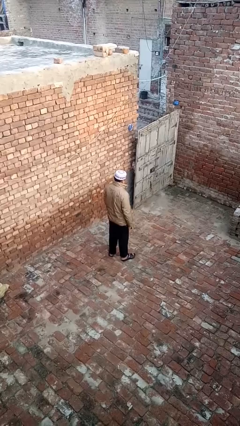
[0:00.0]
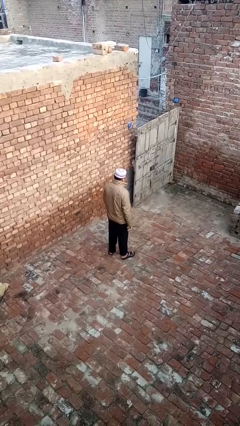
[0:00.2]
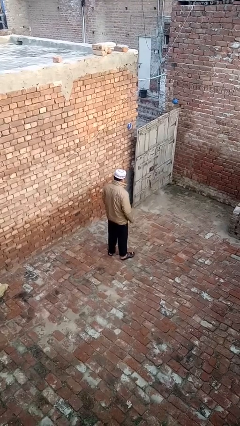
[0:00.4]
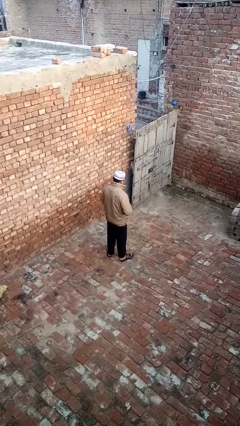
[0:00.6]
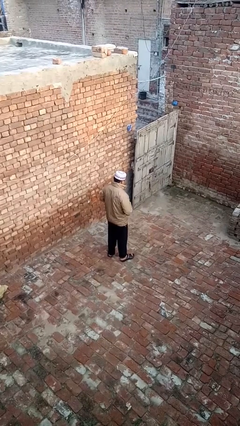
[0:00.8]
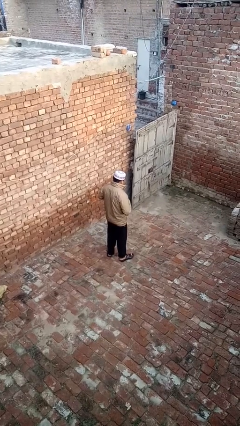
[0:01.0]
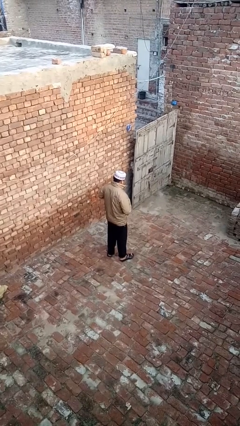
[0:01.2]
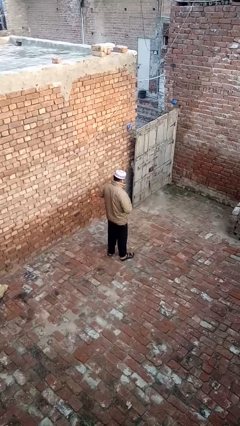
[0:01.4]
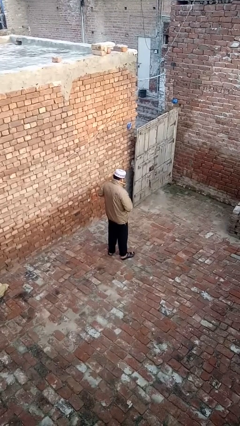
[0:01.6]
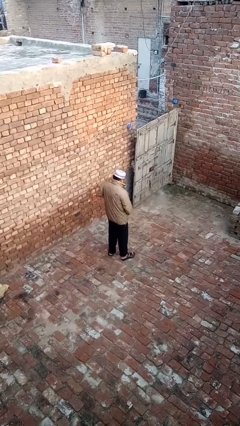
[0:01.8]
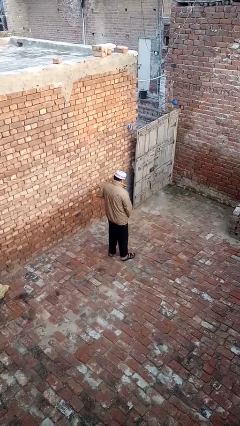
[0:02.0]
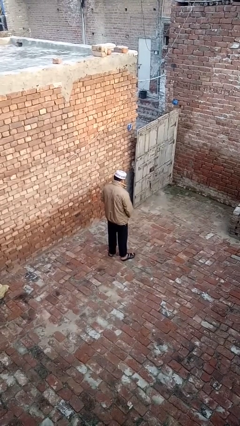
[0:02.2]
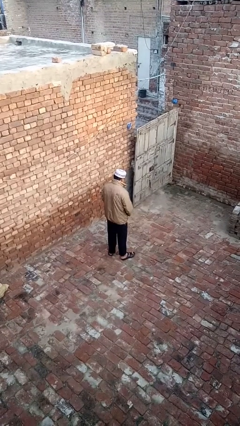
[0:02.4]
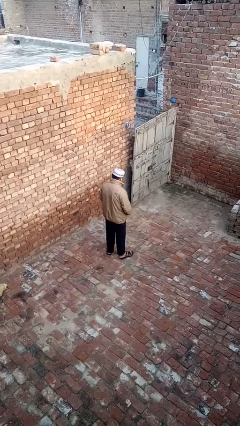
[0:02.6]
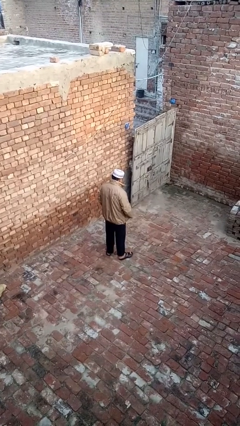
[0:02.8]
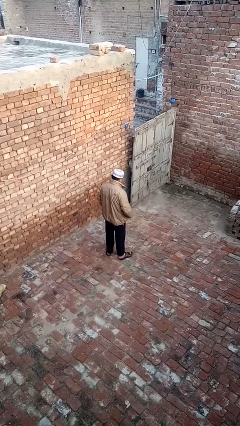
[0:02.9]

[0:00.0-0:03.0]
person unzips jacket

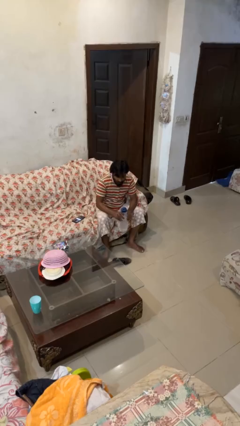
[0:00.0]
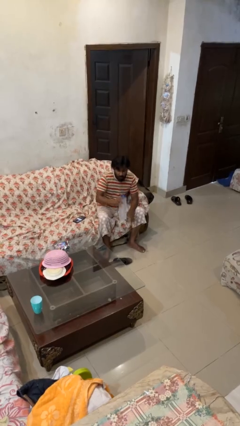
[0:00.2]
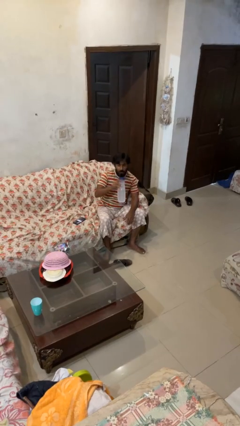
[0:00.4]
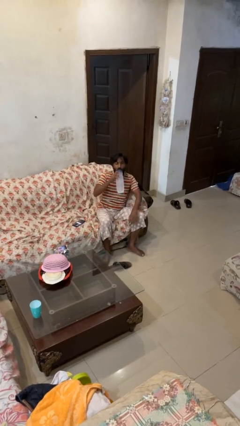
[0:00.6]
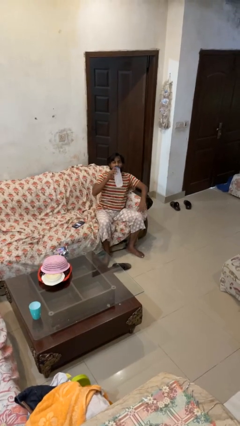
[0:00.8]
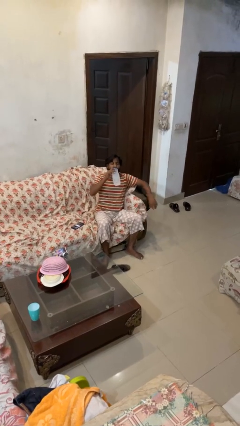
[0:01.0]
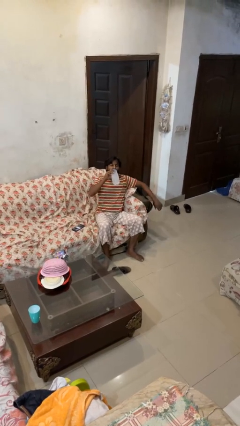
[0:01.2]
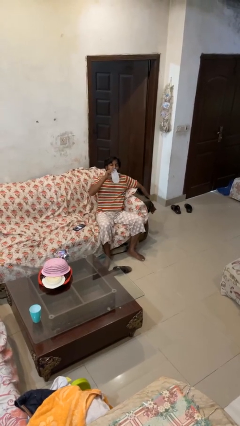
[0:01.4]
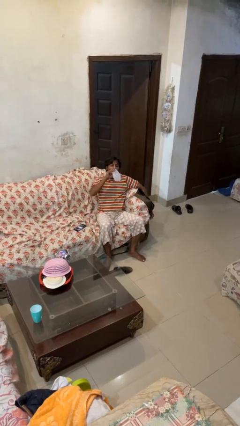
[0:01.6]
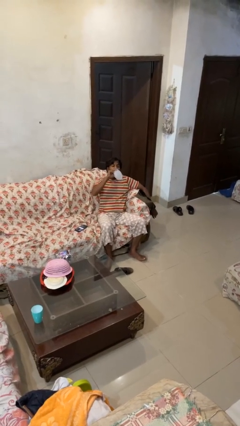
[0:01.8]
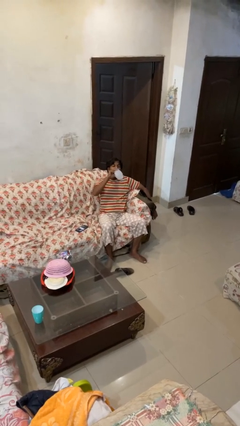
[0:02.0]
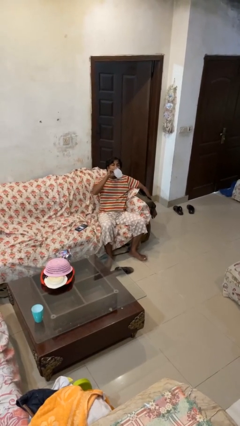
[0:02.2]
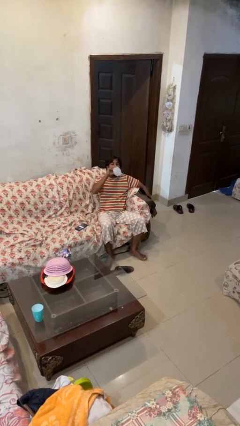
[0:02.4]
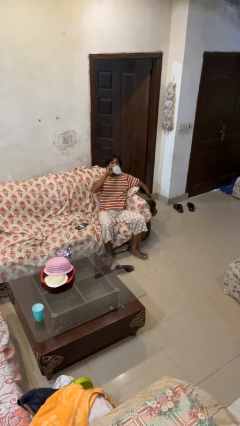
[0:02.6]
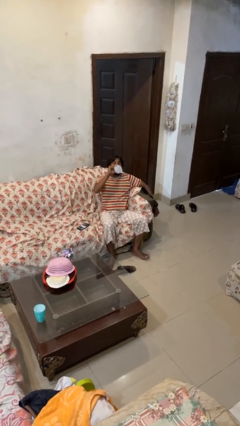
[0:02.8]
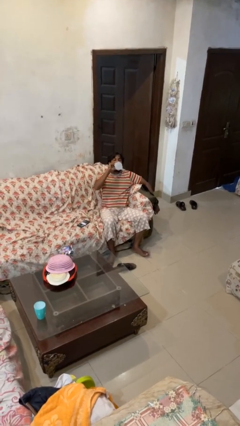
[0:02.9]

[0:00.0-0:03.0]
person drinks from bottle

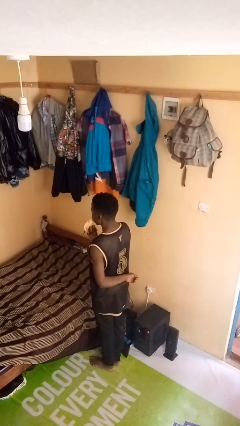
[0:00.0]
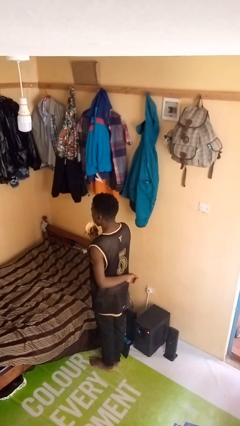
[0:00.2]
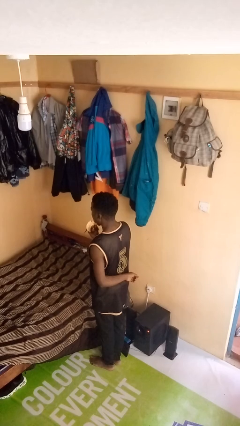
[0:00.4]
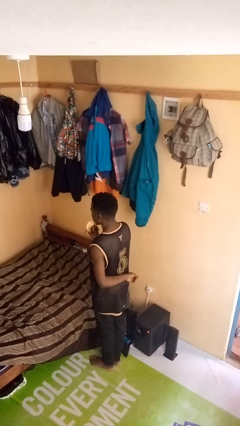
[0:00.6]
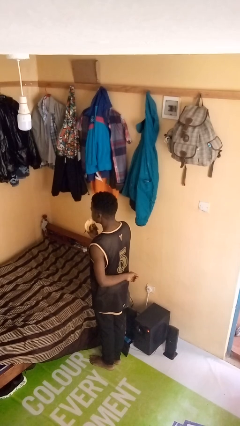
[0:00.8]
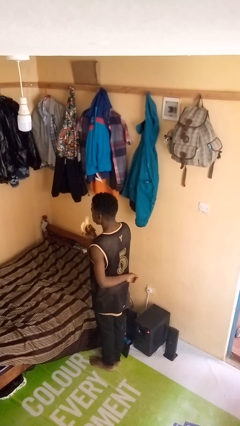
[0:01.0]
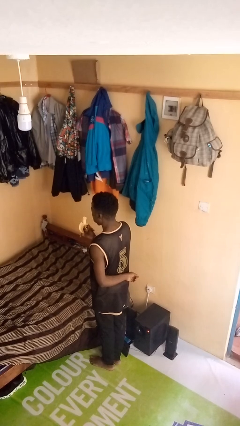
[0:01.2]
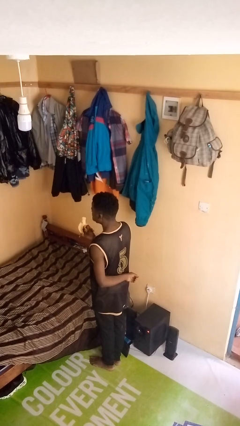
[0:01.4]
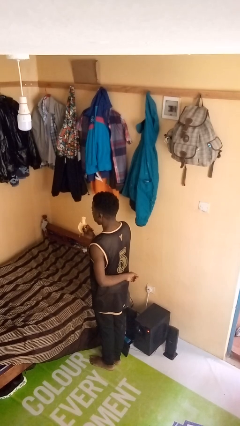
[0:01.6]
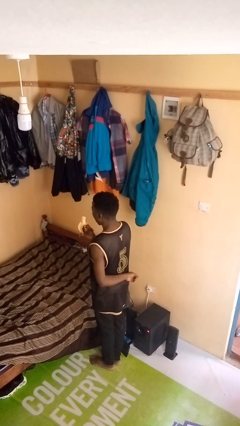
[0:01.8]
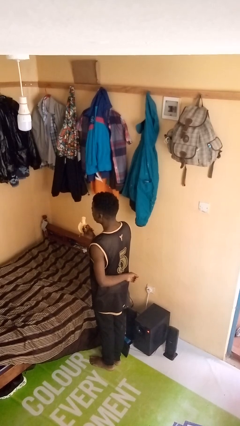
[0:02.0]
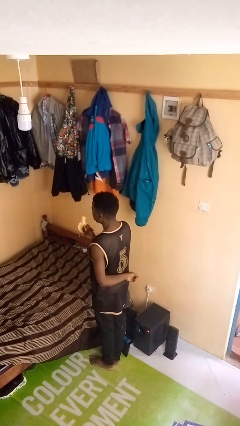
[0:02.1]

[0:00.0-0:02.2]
person eats banana

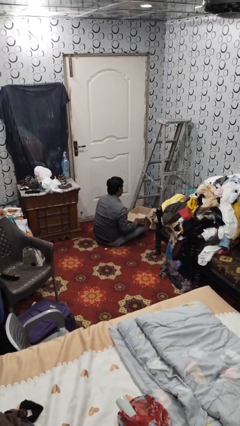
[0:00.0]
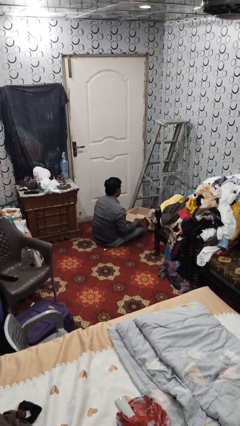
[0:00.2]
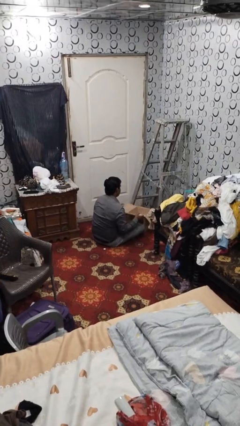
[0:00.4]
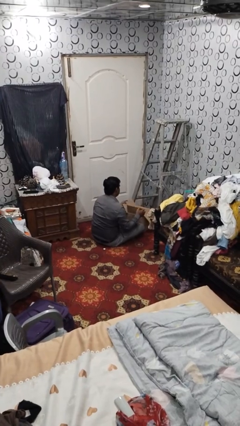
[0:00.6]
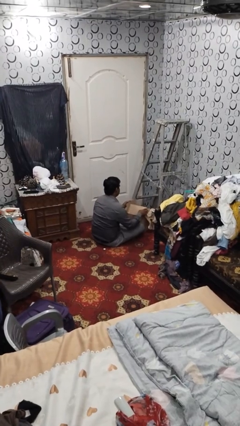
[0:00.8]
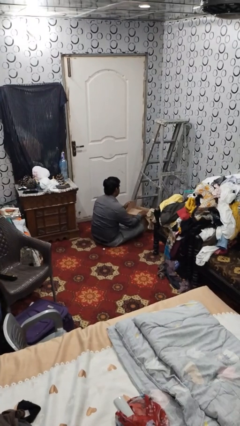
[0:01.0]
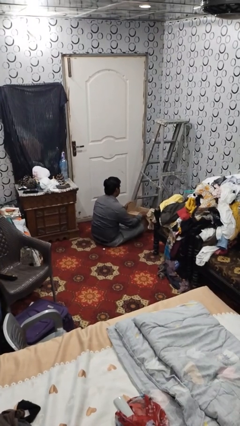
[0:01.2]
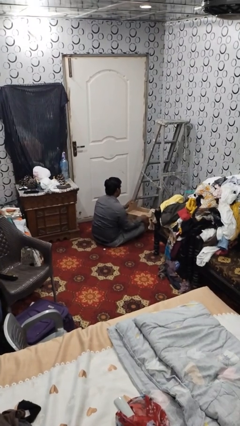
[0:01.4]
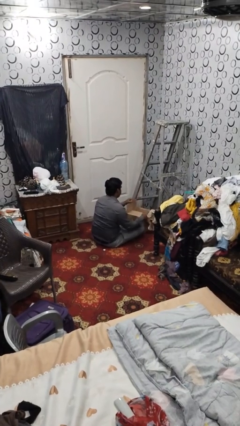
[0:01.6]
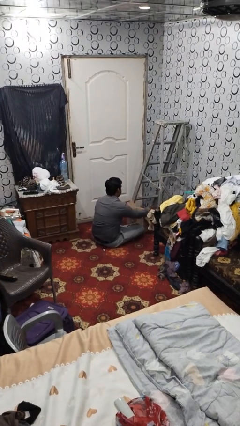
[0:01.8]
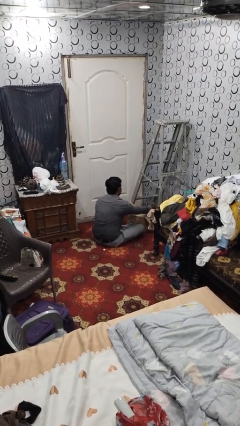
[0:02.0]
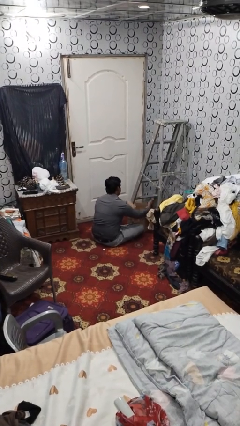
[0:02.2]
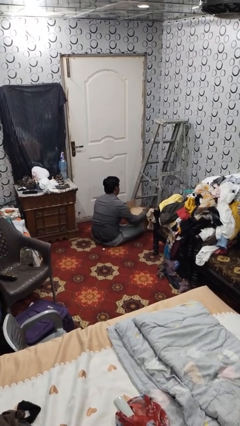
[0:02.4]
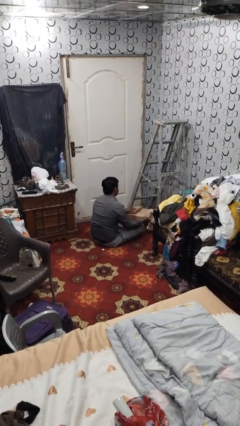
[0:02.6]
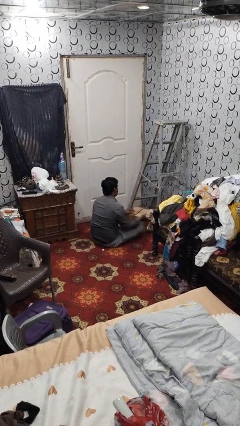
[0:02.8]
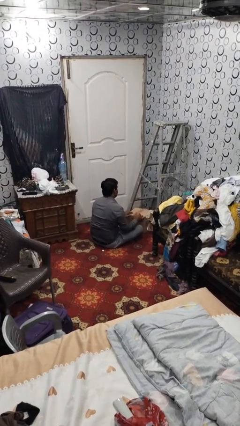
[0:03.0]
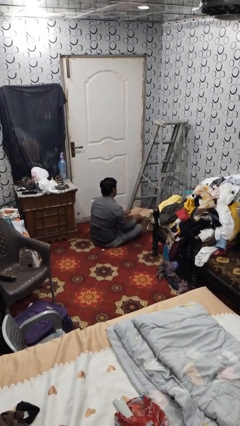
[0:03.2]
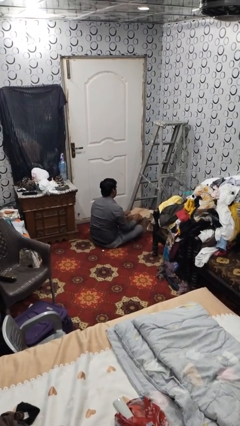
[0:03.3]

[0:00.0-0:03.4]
person closes box

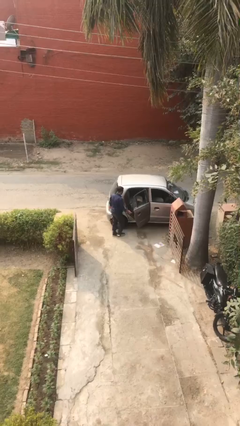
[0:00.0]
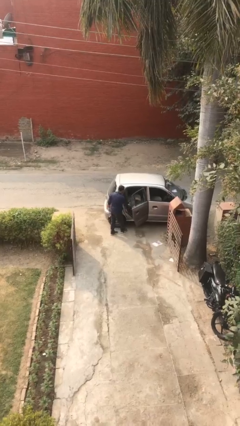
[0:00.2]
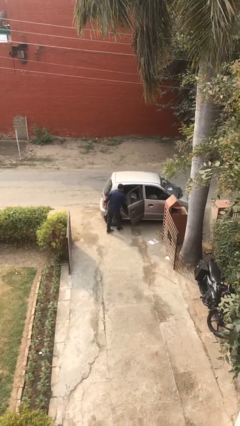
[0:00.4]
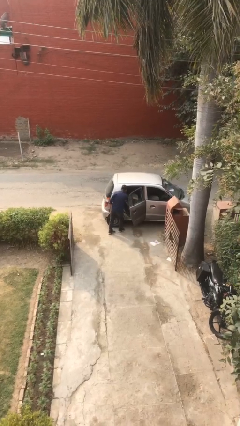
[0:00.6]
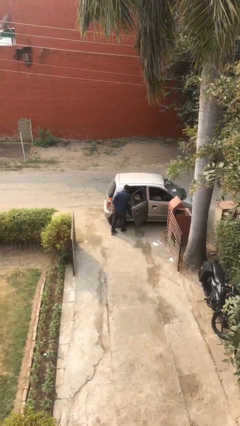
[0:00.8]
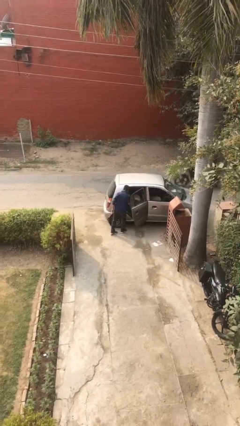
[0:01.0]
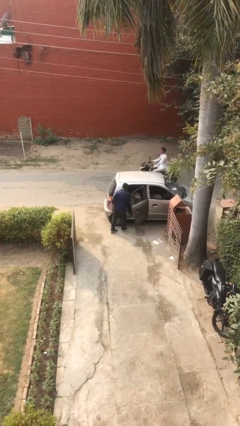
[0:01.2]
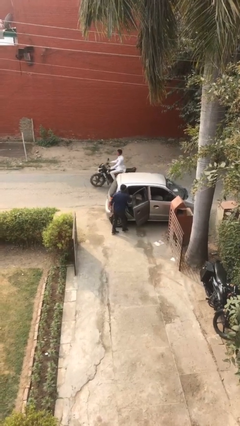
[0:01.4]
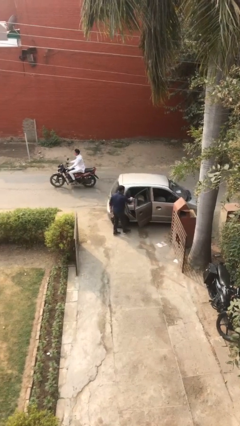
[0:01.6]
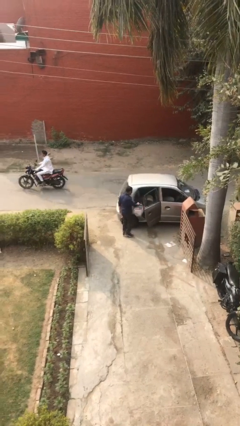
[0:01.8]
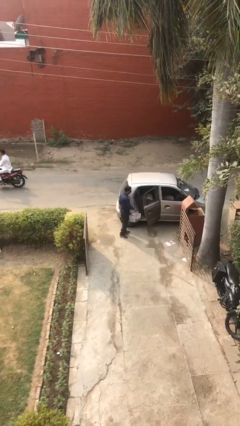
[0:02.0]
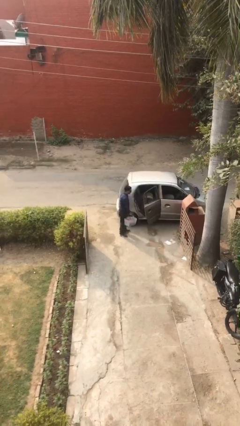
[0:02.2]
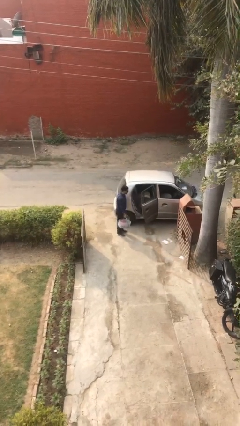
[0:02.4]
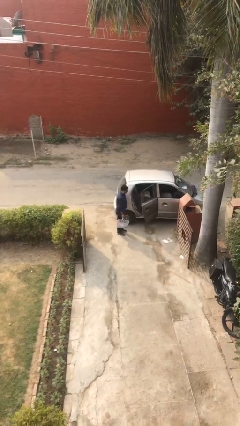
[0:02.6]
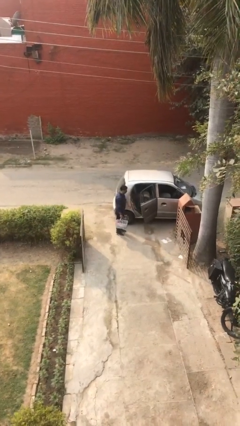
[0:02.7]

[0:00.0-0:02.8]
person unloads car

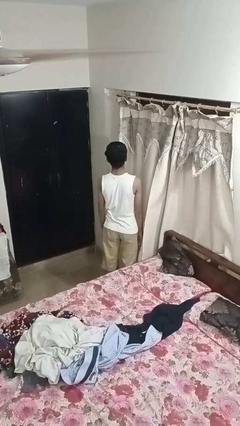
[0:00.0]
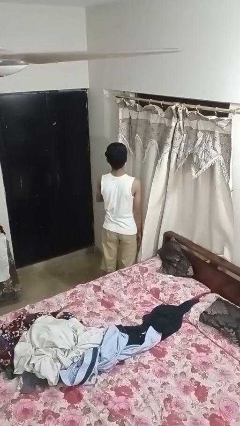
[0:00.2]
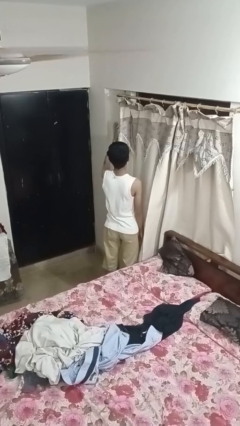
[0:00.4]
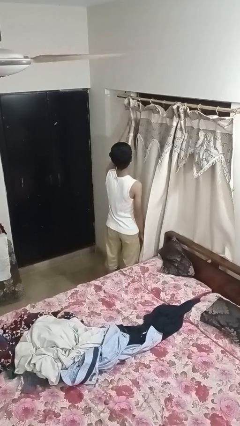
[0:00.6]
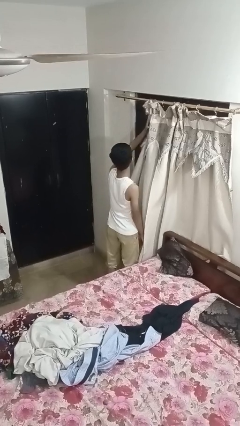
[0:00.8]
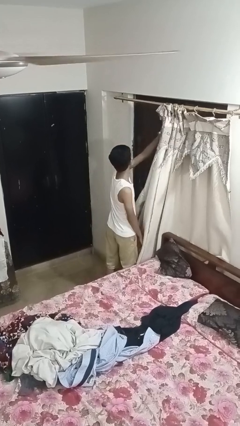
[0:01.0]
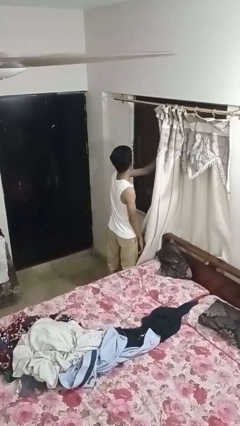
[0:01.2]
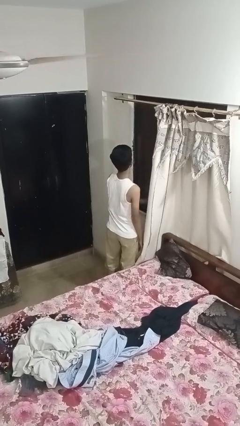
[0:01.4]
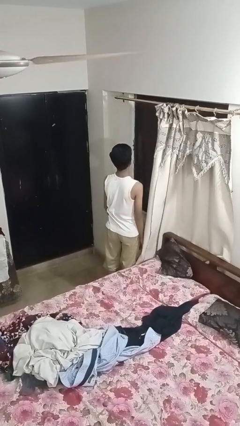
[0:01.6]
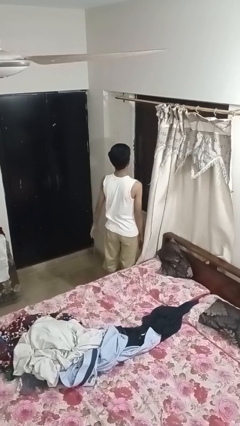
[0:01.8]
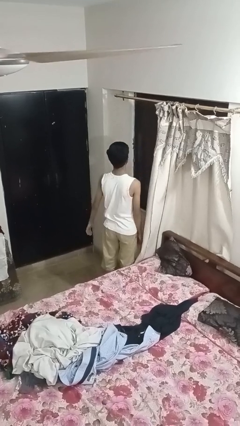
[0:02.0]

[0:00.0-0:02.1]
person opens curtains

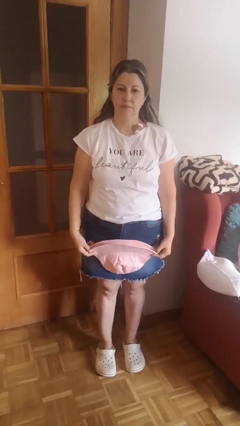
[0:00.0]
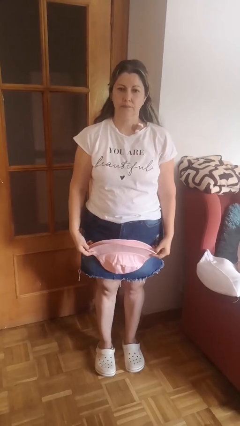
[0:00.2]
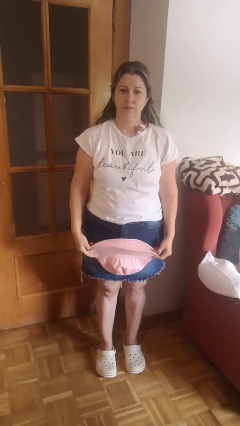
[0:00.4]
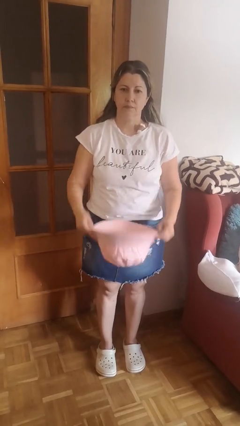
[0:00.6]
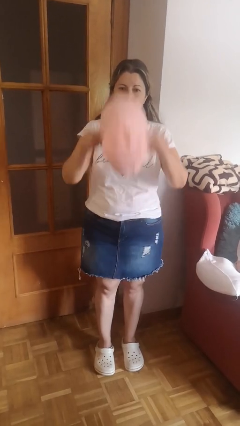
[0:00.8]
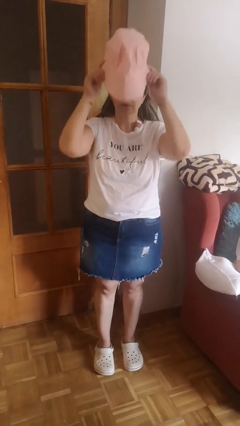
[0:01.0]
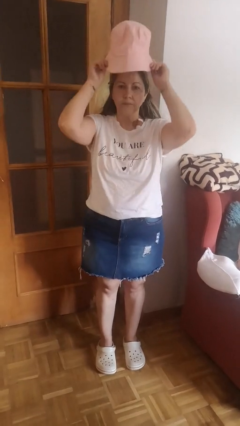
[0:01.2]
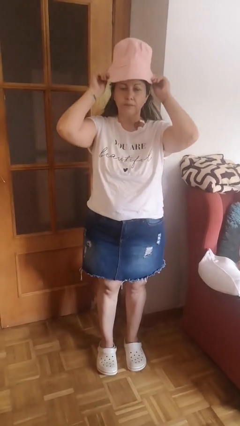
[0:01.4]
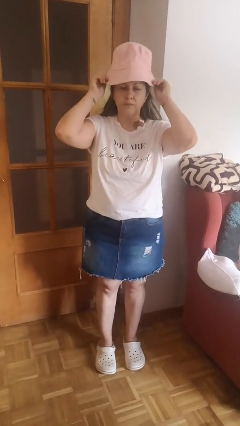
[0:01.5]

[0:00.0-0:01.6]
person puts on hat
